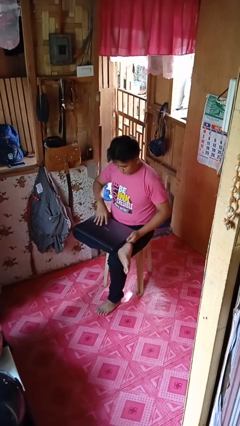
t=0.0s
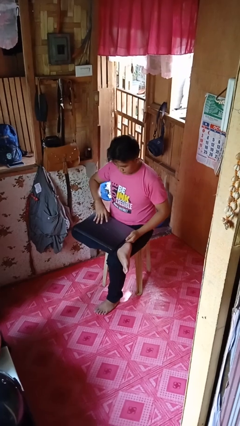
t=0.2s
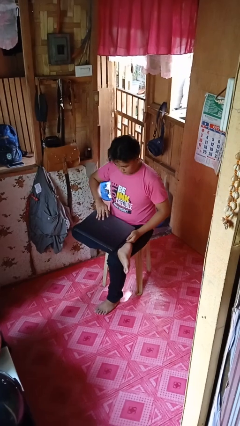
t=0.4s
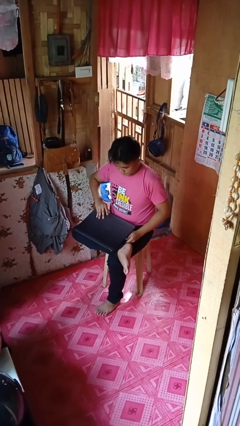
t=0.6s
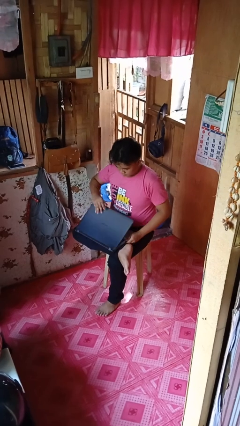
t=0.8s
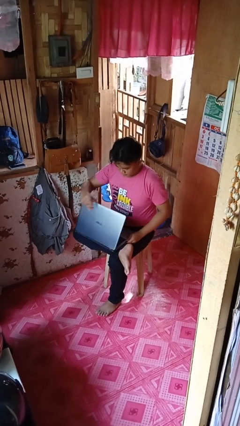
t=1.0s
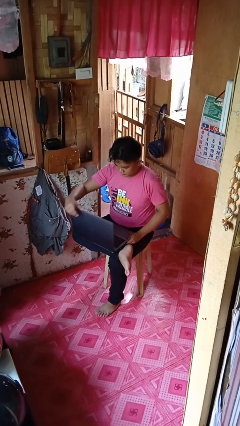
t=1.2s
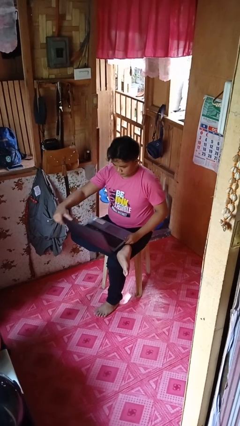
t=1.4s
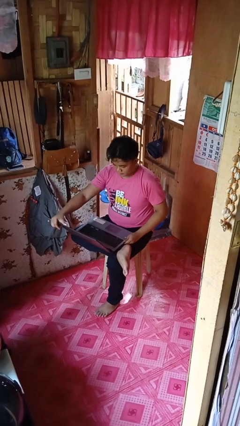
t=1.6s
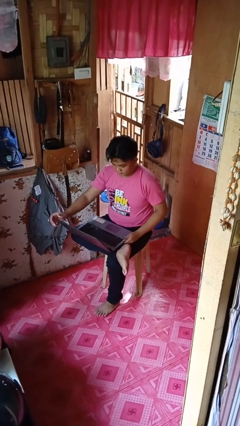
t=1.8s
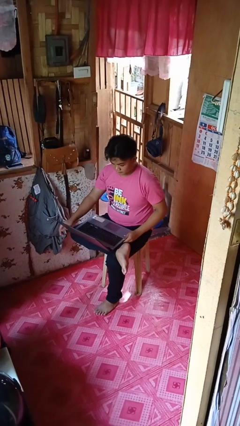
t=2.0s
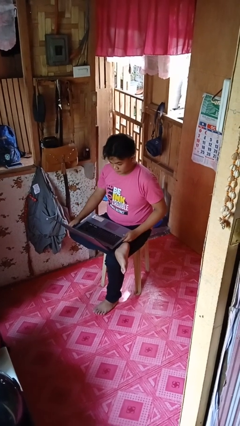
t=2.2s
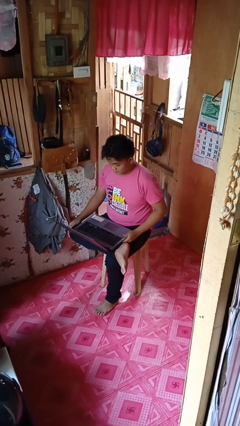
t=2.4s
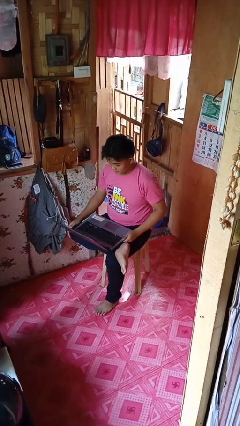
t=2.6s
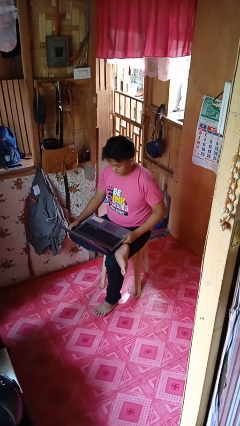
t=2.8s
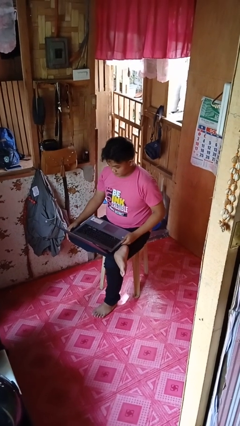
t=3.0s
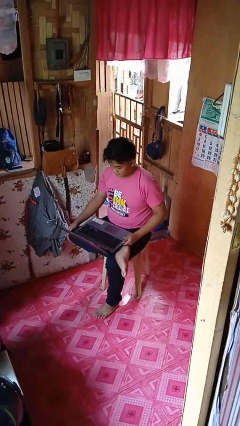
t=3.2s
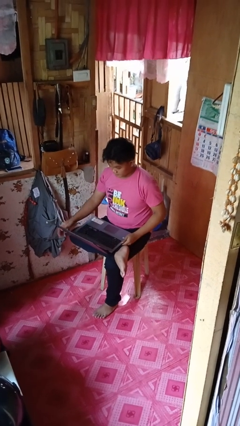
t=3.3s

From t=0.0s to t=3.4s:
person opens laptop

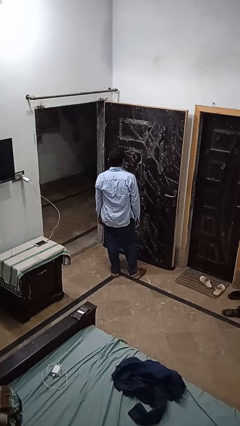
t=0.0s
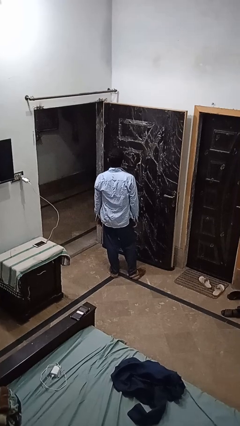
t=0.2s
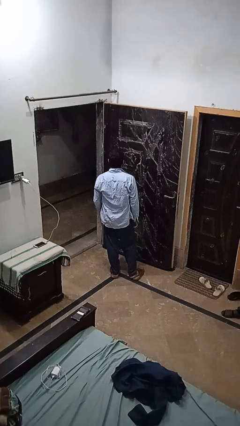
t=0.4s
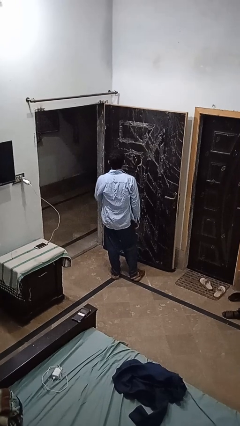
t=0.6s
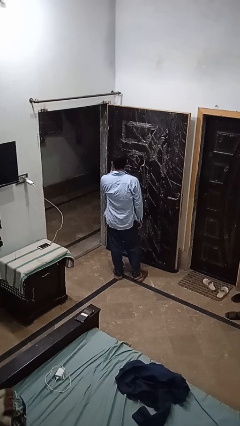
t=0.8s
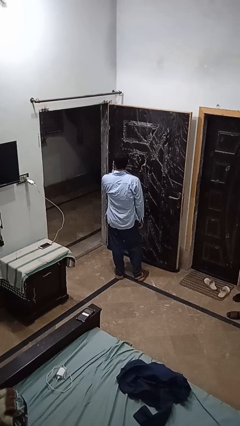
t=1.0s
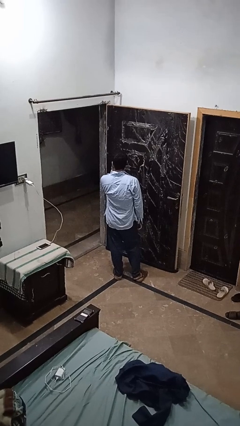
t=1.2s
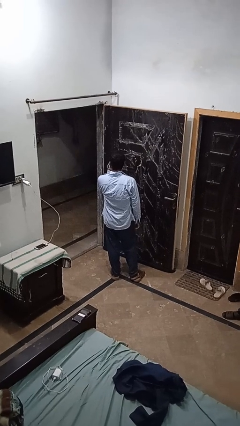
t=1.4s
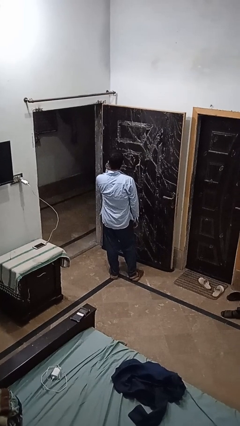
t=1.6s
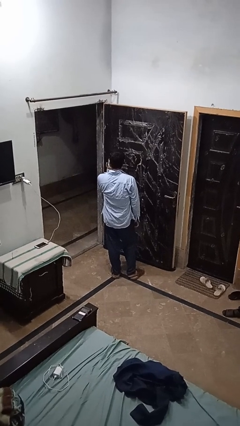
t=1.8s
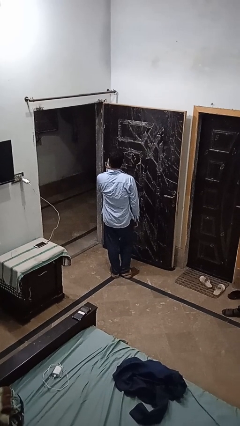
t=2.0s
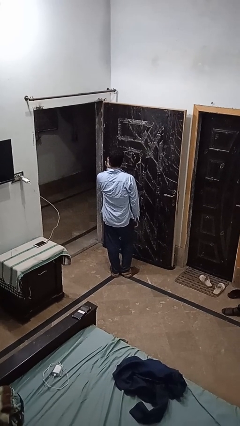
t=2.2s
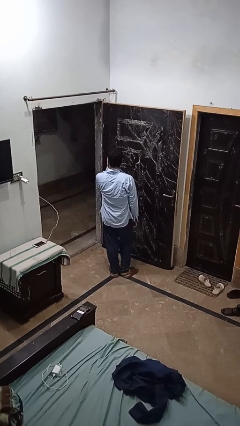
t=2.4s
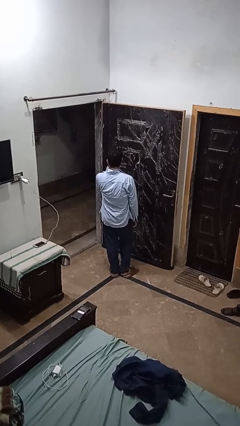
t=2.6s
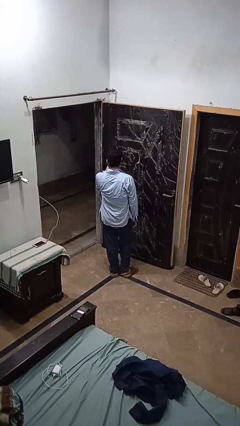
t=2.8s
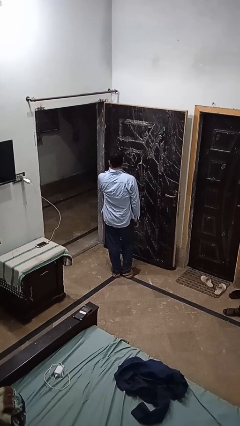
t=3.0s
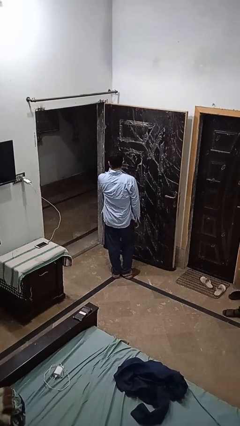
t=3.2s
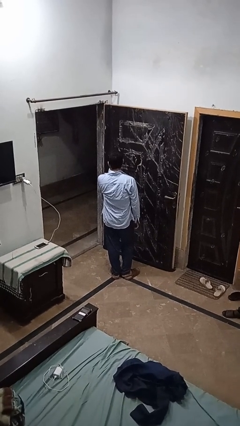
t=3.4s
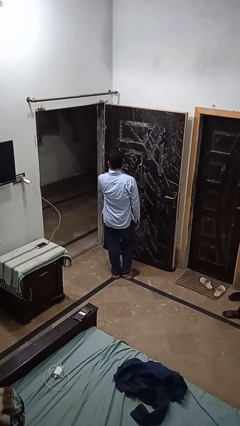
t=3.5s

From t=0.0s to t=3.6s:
person licks fingers

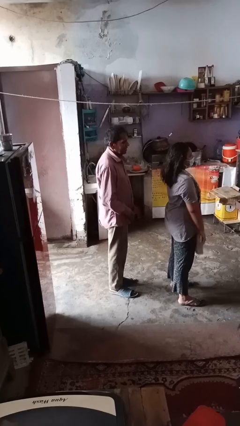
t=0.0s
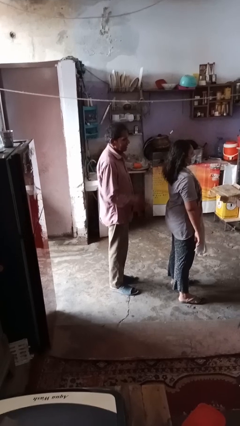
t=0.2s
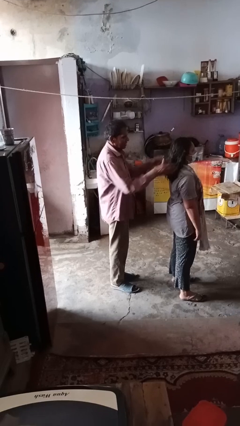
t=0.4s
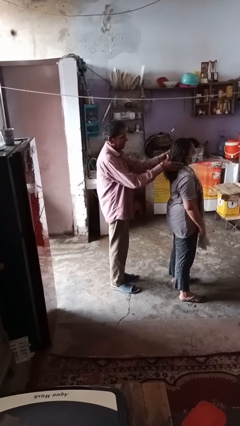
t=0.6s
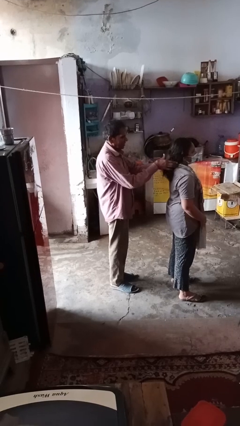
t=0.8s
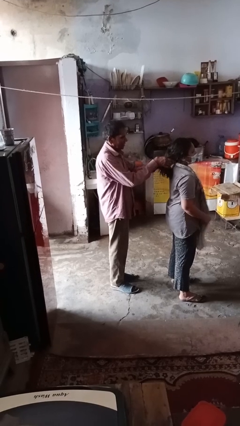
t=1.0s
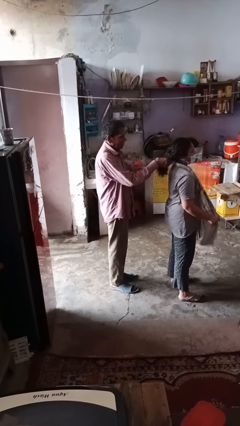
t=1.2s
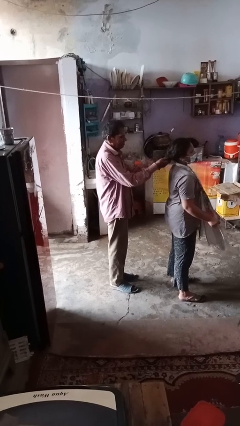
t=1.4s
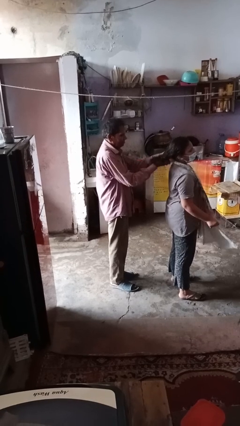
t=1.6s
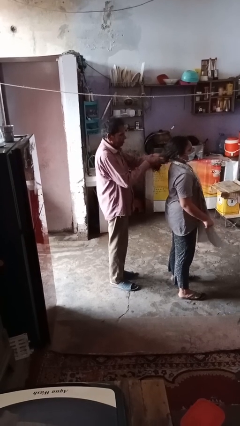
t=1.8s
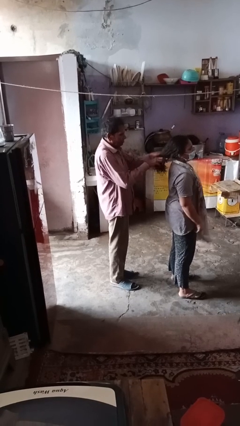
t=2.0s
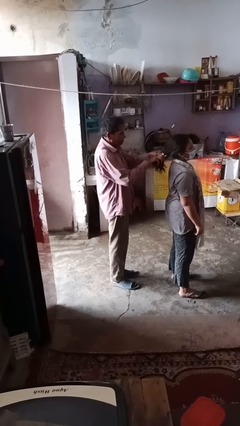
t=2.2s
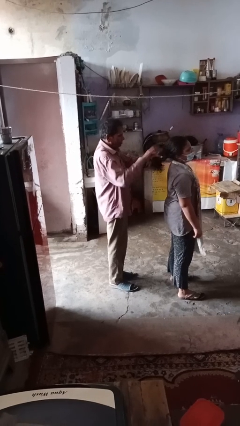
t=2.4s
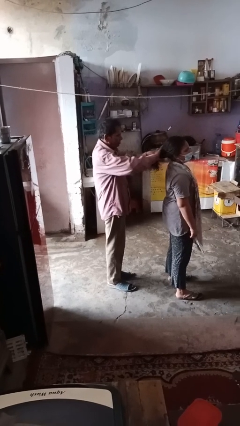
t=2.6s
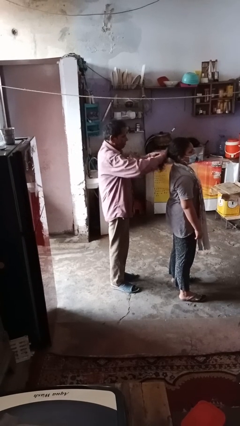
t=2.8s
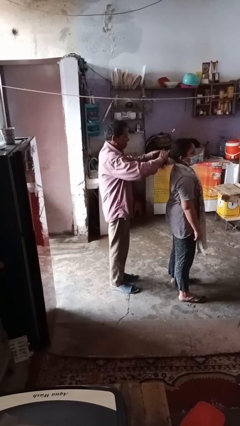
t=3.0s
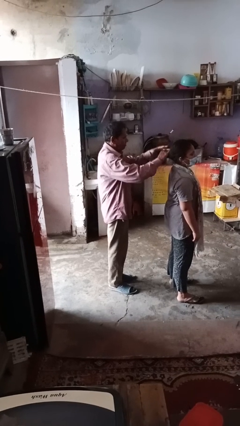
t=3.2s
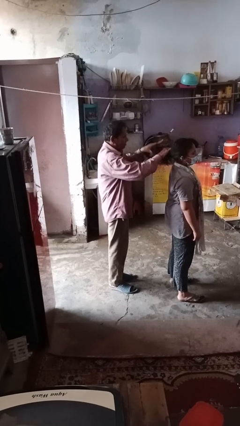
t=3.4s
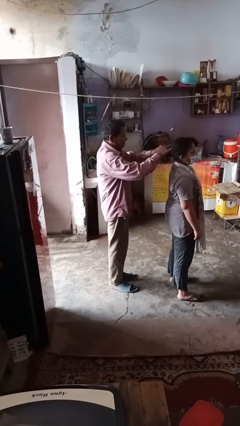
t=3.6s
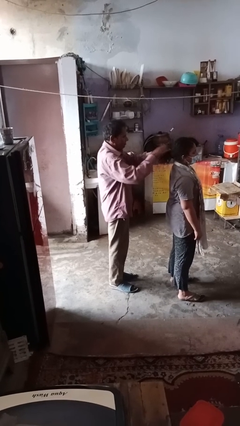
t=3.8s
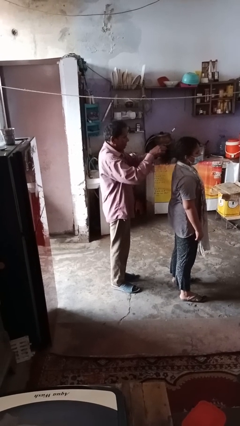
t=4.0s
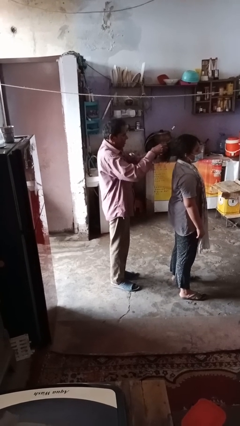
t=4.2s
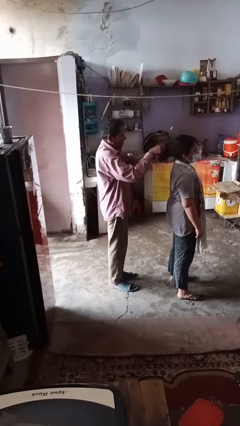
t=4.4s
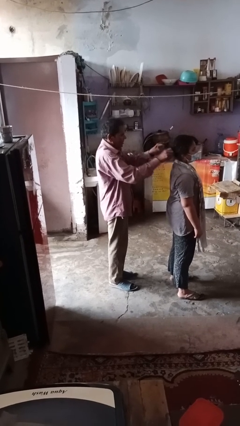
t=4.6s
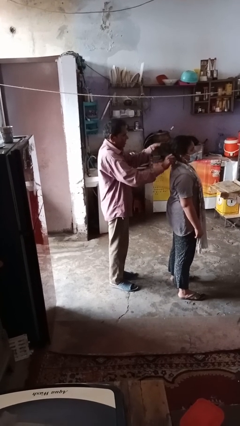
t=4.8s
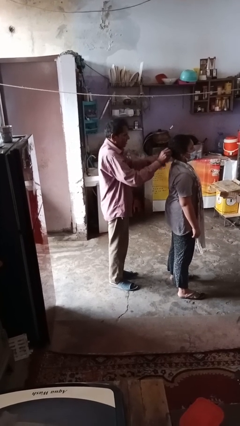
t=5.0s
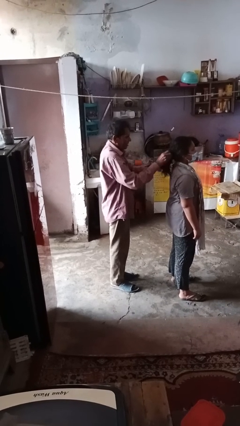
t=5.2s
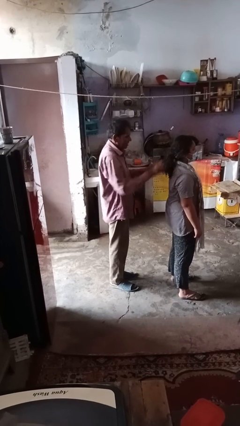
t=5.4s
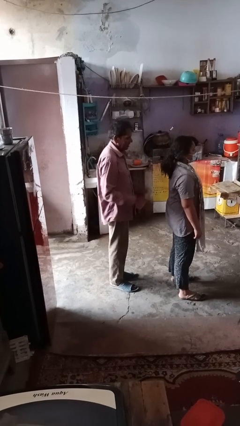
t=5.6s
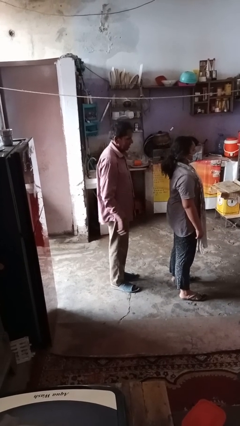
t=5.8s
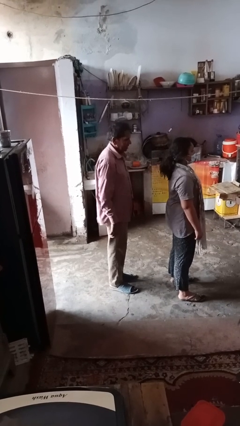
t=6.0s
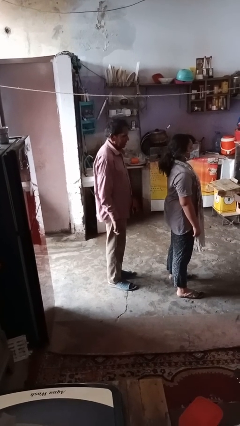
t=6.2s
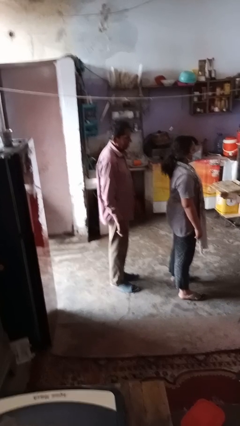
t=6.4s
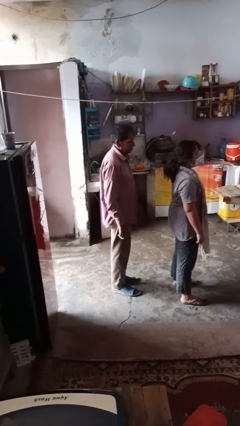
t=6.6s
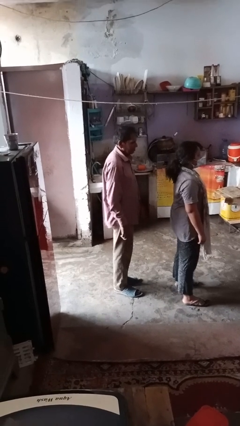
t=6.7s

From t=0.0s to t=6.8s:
person braids hair of person

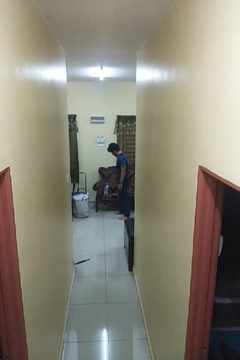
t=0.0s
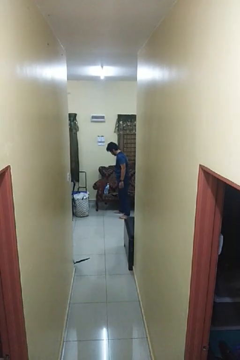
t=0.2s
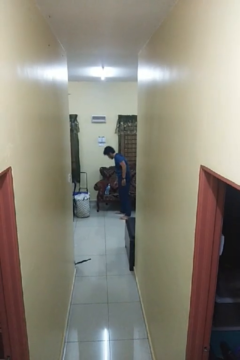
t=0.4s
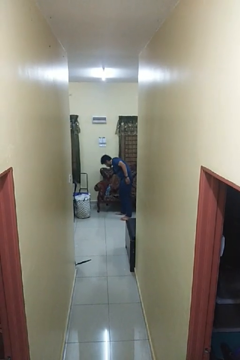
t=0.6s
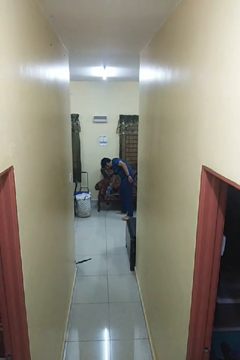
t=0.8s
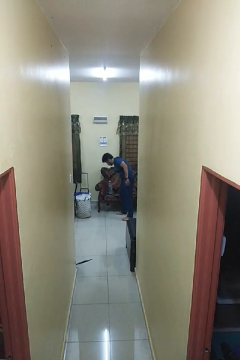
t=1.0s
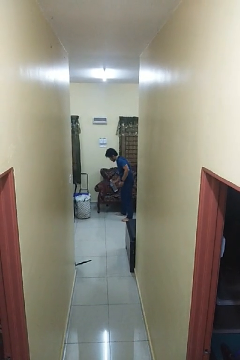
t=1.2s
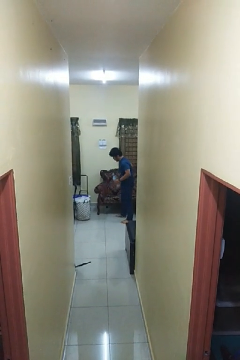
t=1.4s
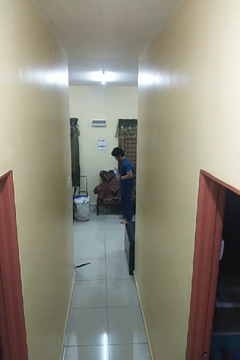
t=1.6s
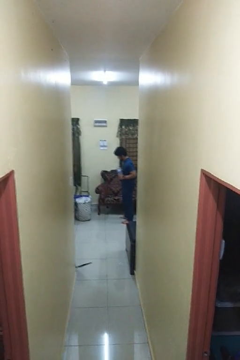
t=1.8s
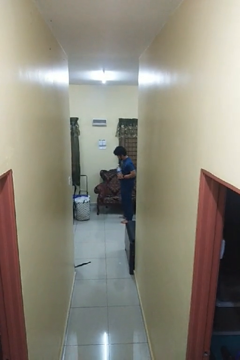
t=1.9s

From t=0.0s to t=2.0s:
person picks up object from couch

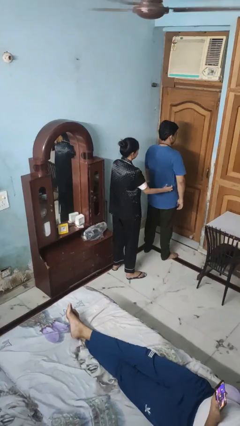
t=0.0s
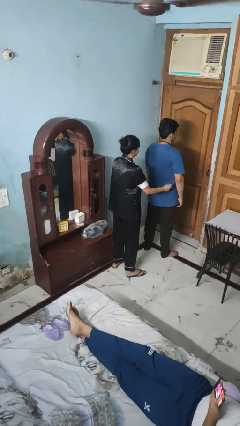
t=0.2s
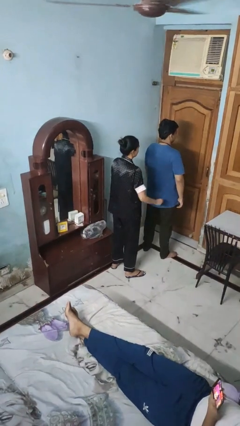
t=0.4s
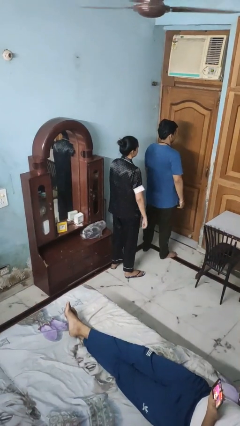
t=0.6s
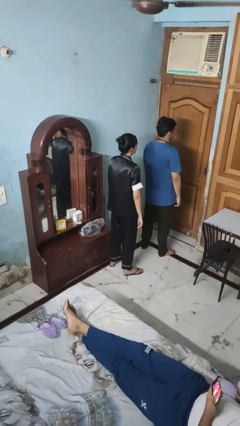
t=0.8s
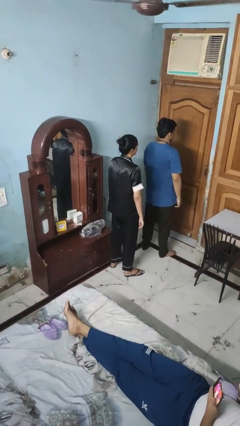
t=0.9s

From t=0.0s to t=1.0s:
person tickles person

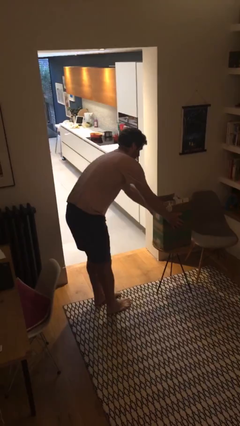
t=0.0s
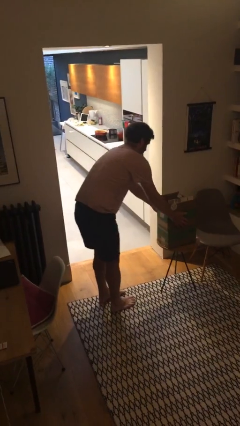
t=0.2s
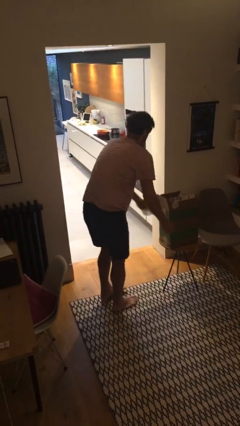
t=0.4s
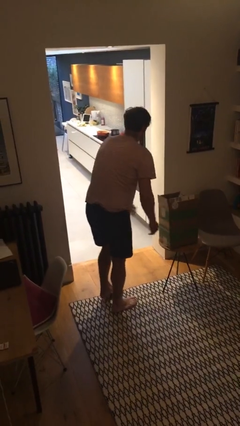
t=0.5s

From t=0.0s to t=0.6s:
person puts down object on table

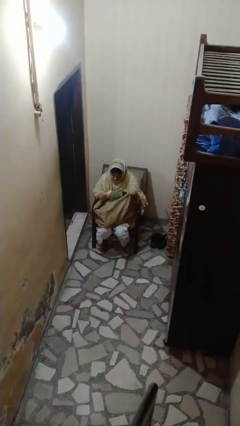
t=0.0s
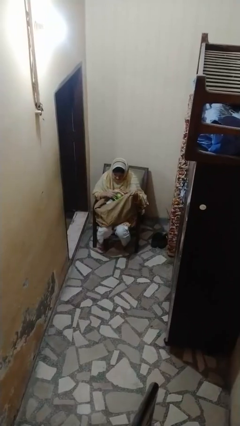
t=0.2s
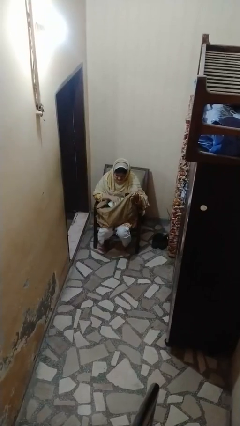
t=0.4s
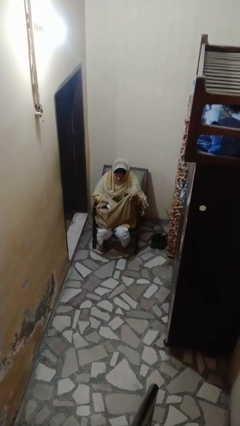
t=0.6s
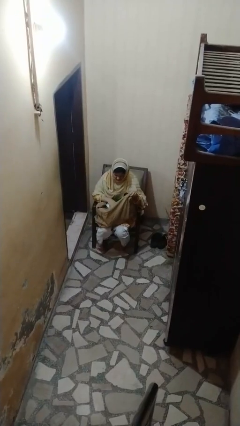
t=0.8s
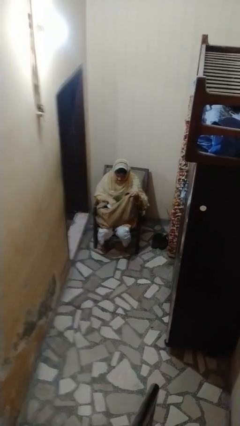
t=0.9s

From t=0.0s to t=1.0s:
person puts object into bag
